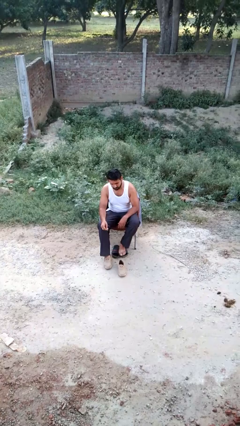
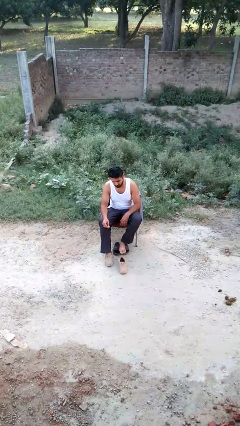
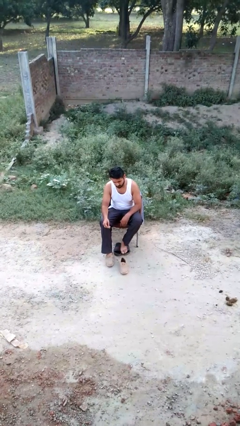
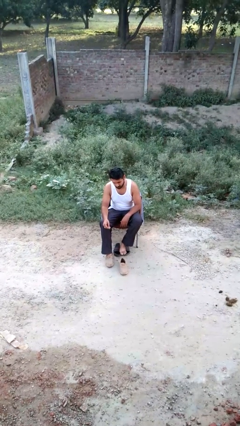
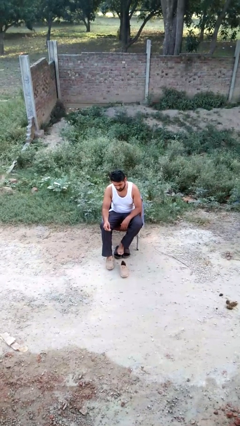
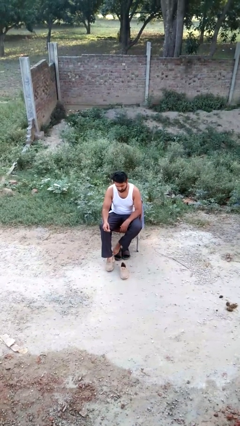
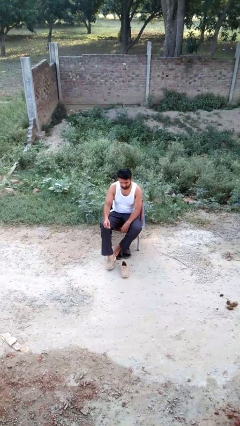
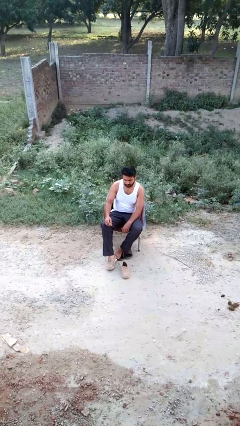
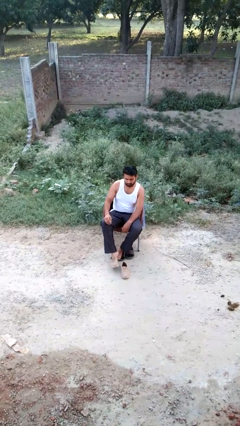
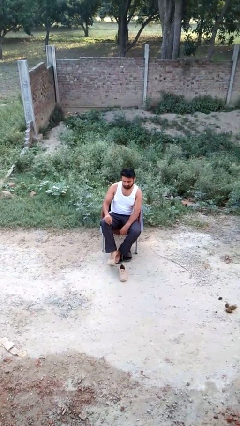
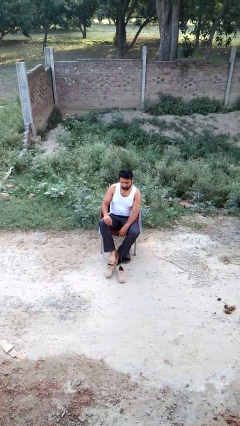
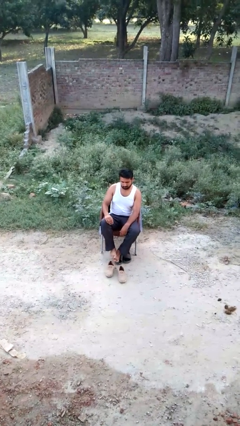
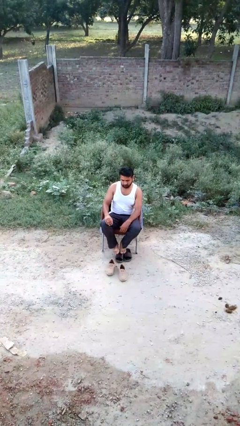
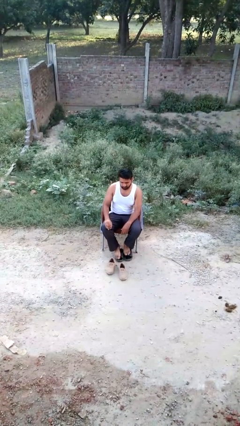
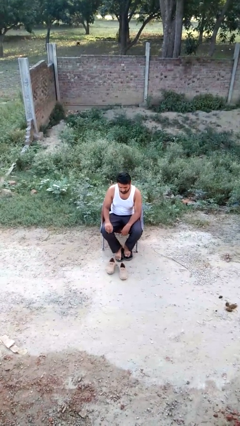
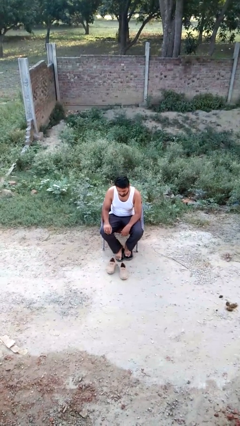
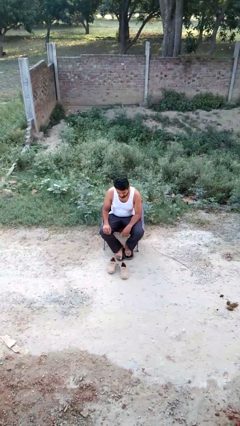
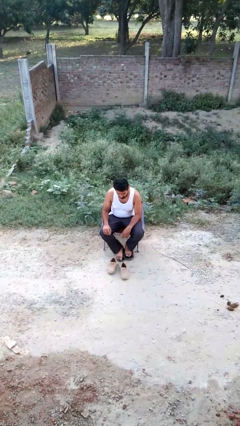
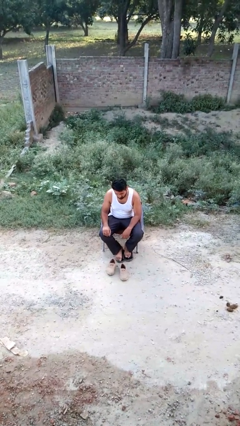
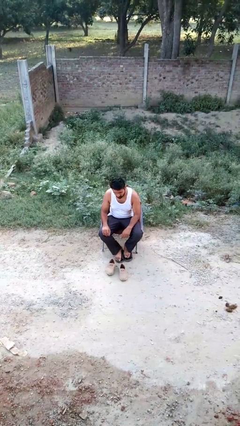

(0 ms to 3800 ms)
person takes off shoes

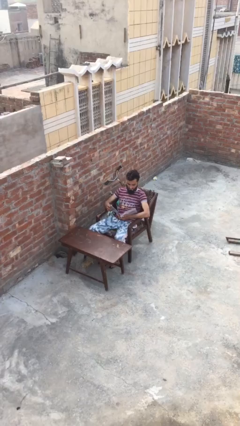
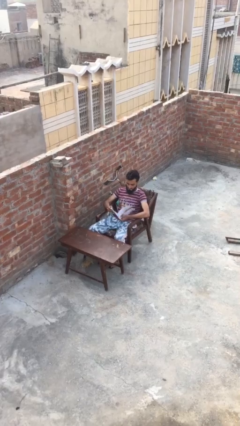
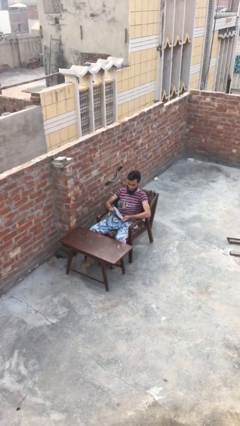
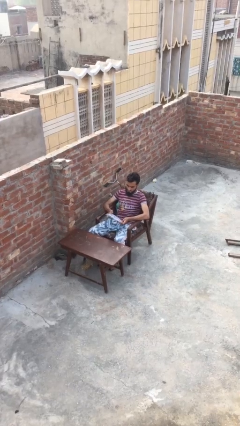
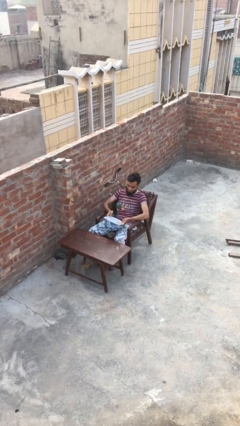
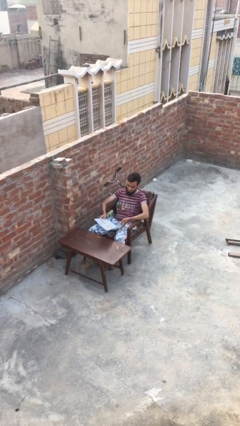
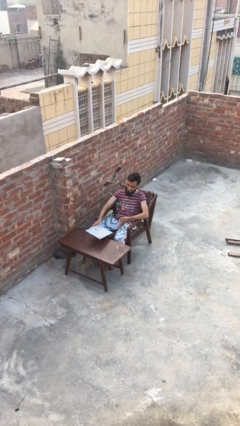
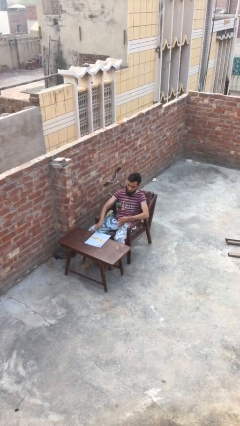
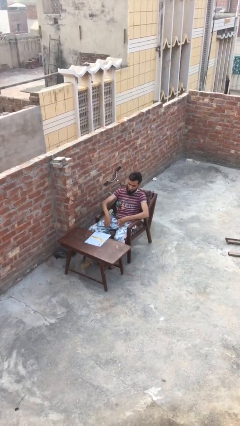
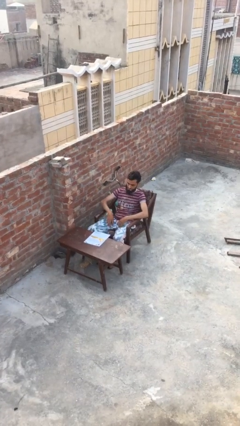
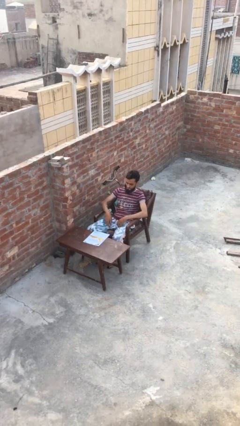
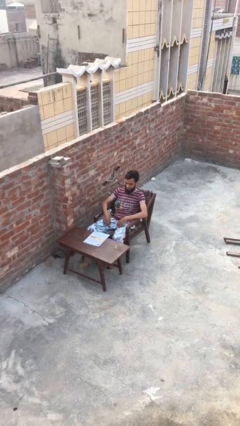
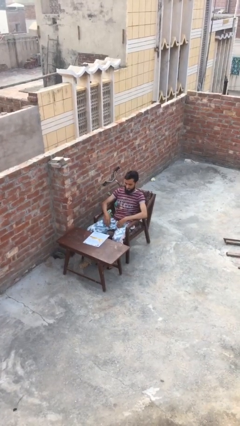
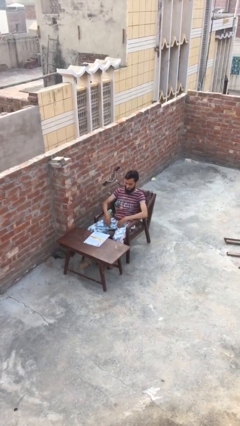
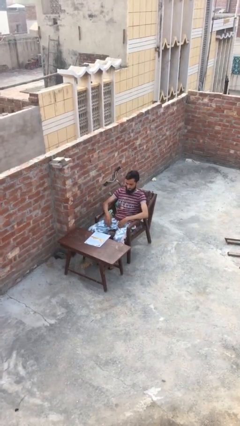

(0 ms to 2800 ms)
person puts down object on table

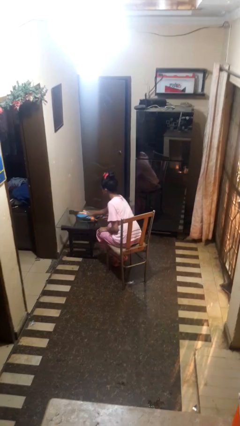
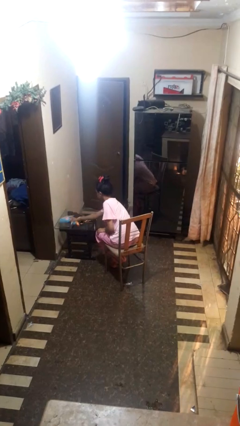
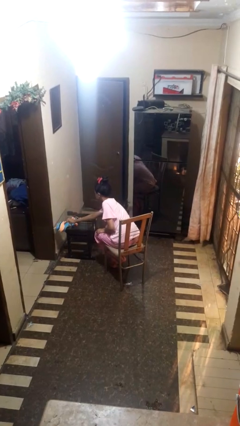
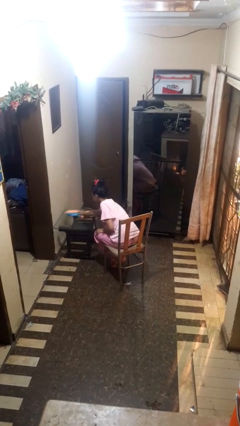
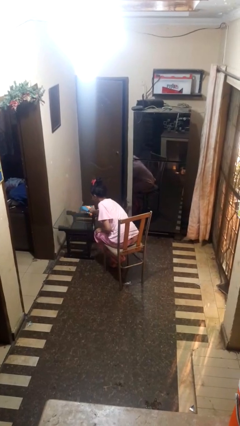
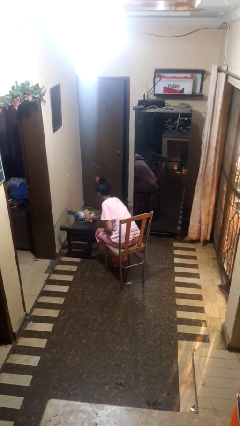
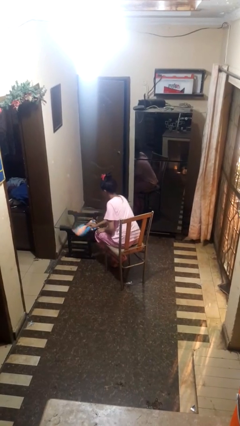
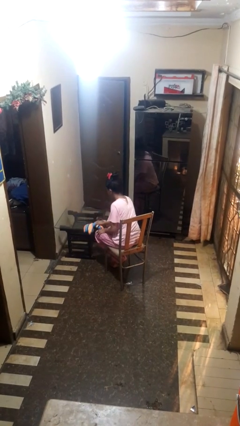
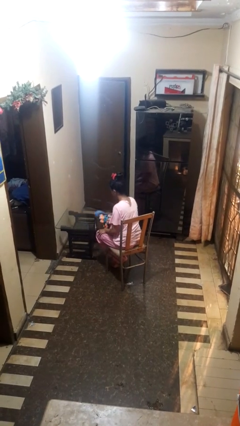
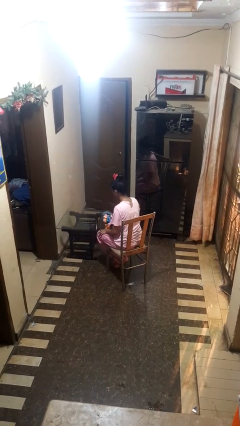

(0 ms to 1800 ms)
person cleans table with rag

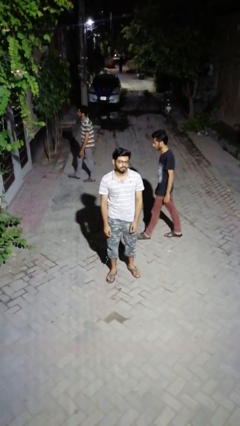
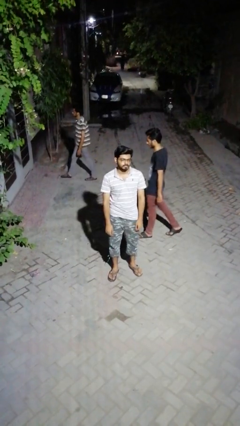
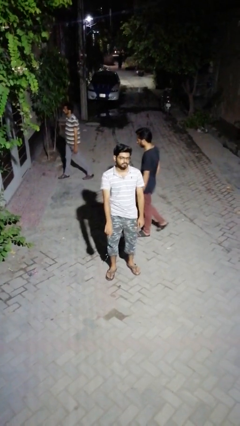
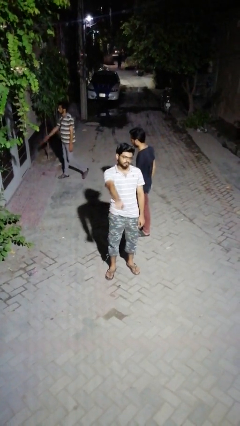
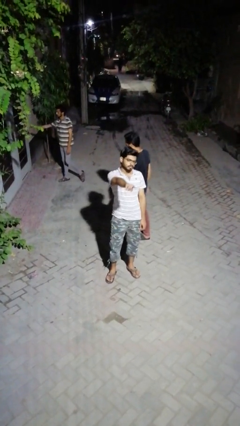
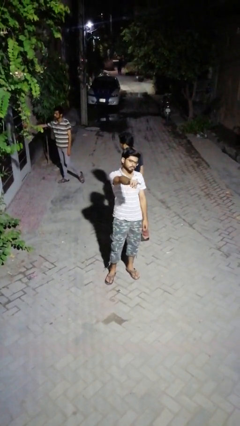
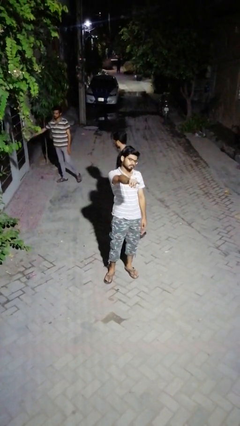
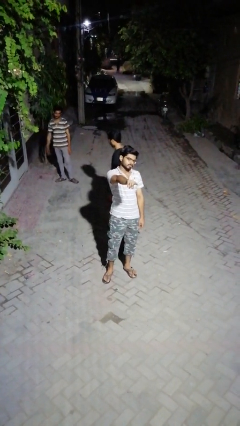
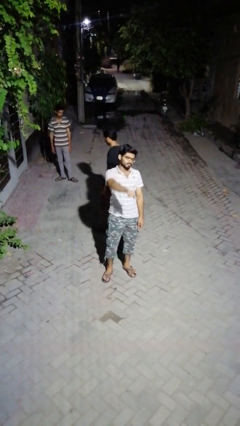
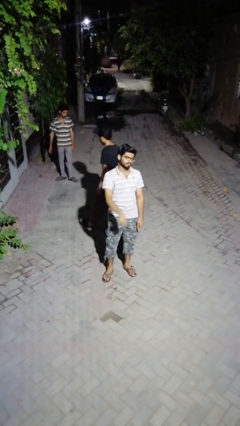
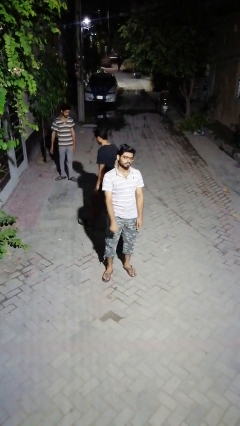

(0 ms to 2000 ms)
person points at person

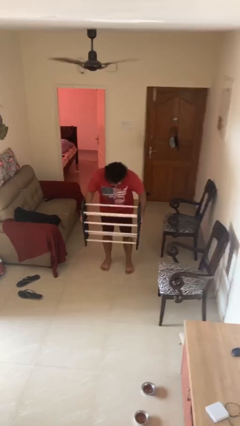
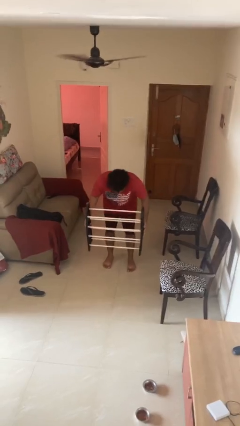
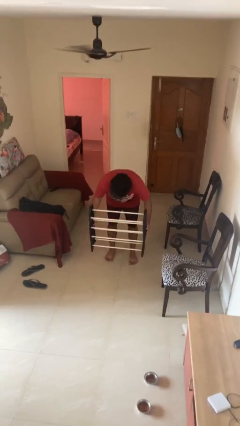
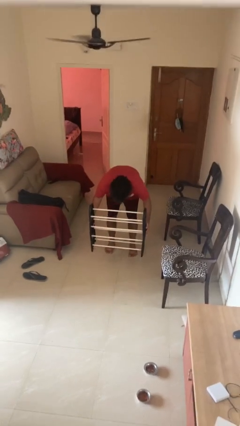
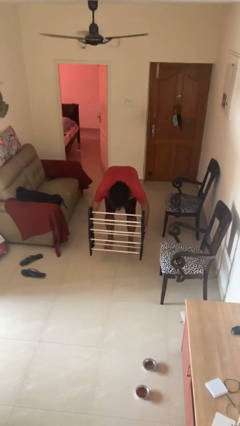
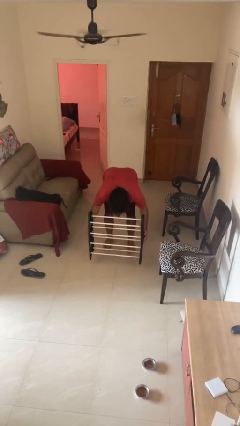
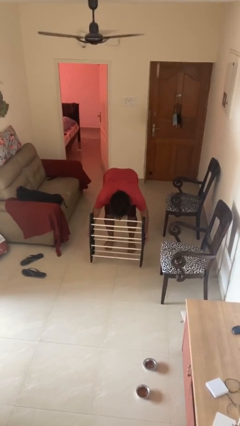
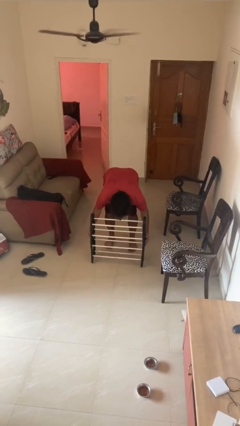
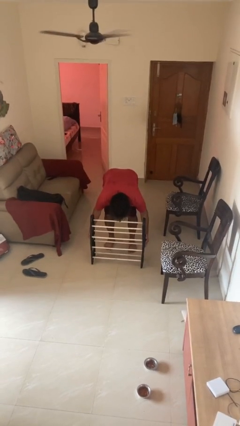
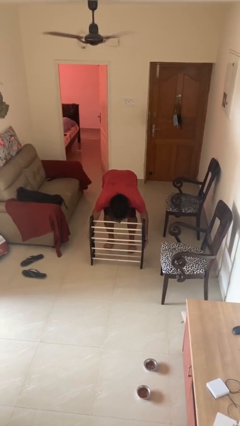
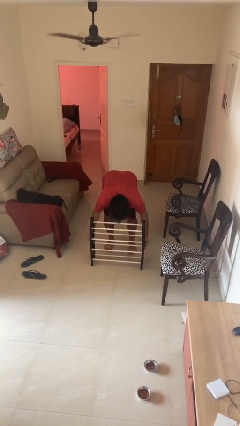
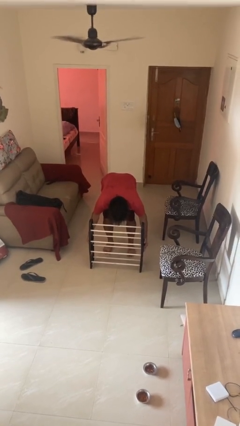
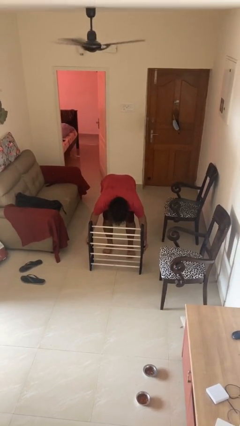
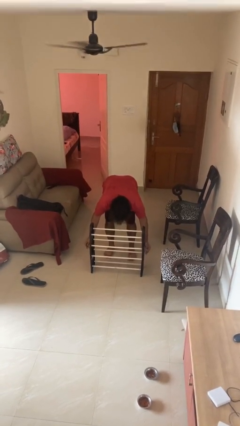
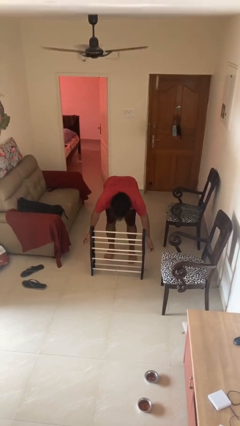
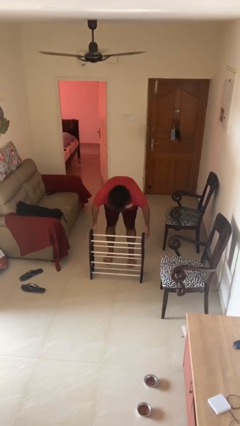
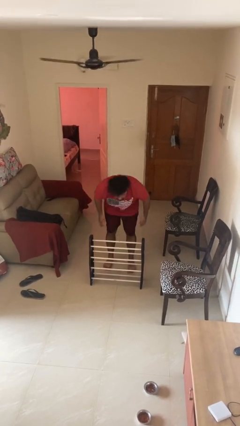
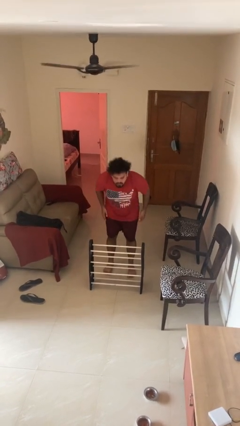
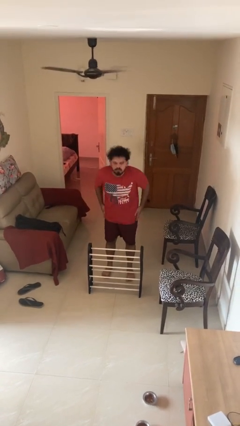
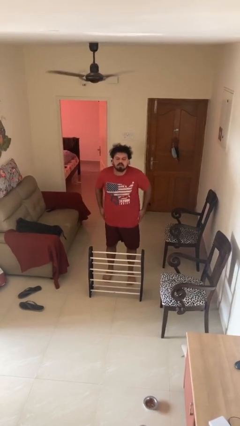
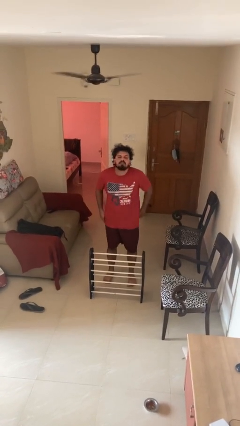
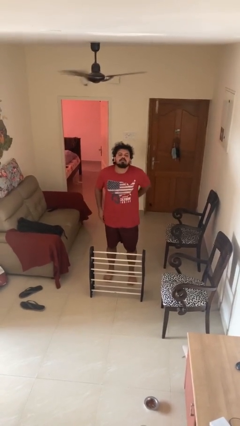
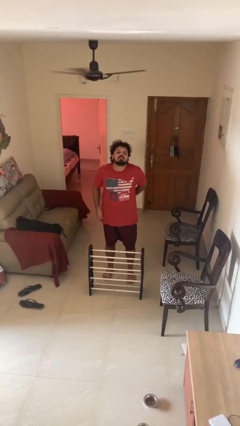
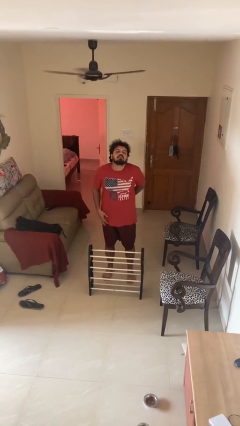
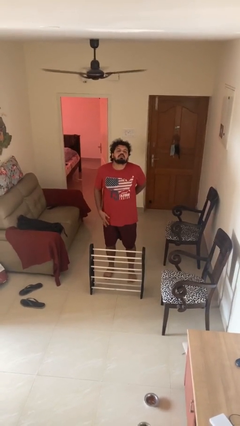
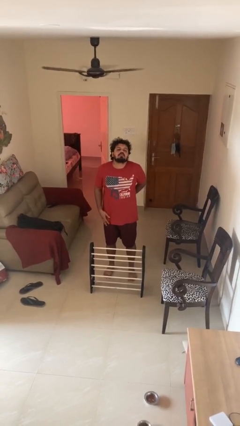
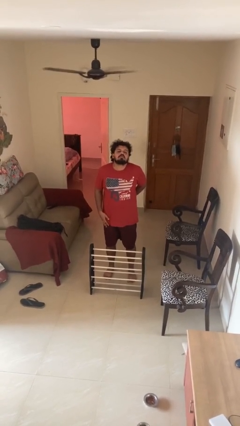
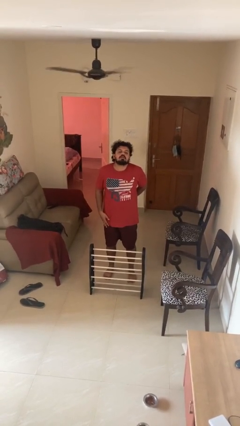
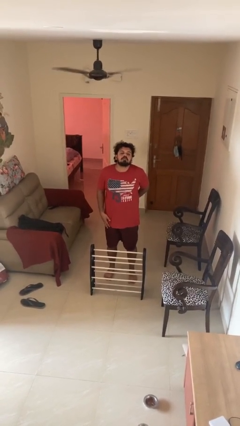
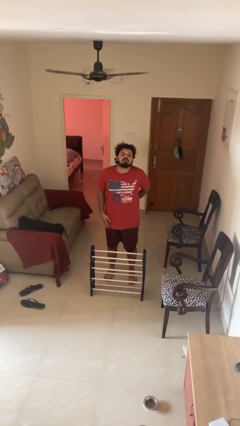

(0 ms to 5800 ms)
person puts down object on floor

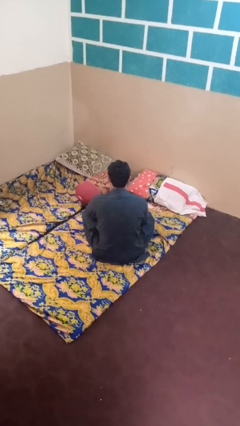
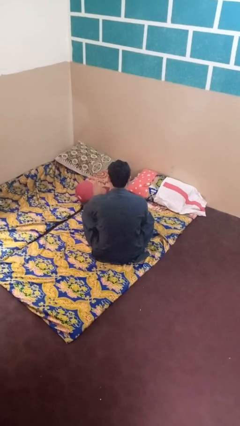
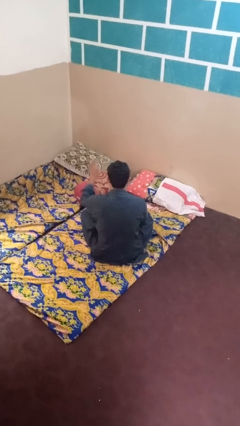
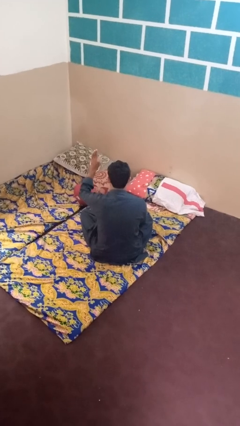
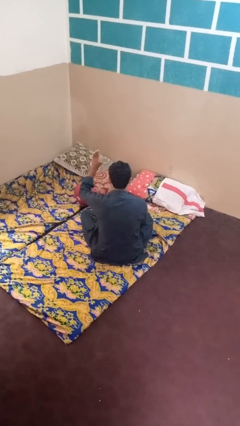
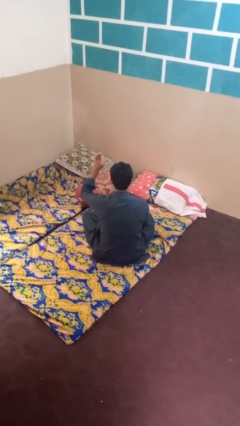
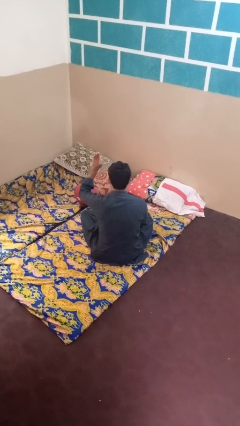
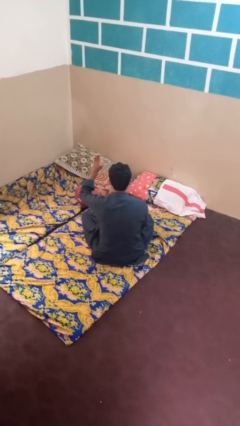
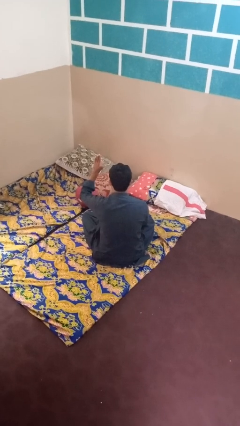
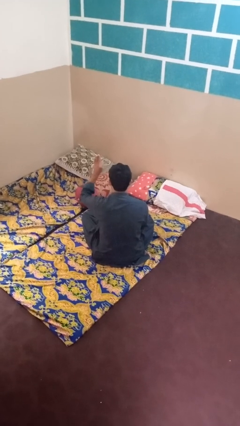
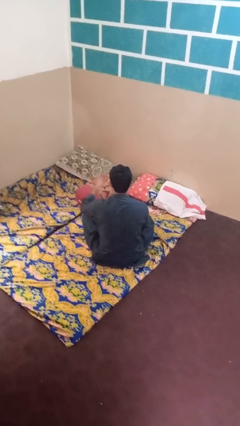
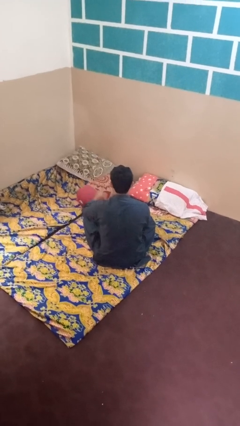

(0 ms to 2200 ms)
person gestures number three
